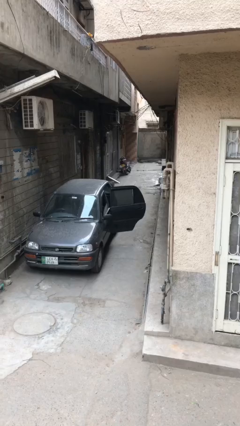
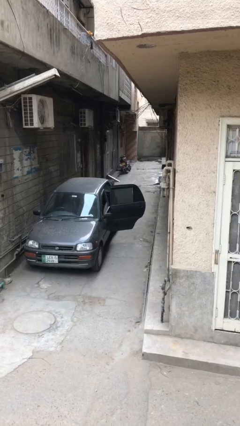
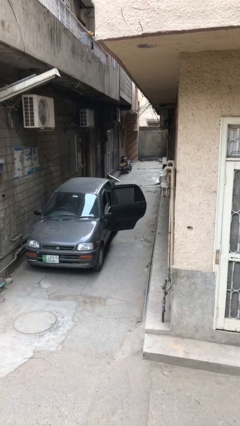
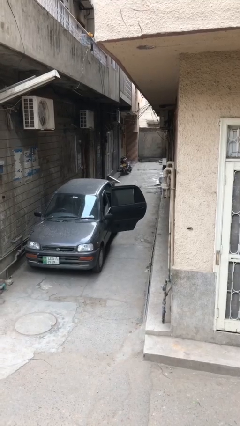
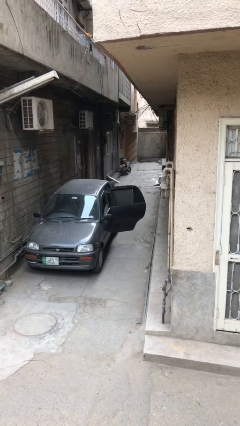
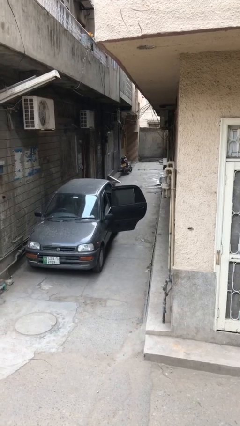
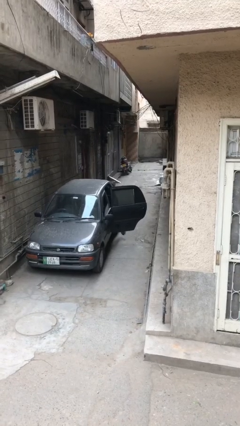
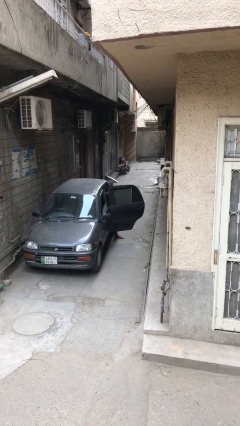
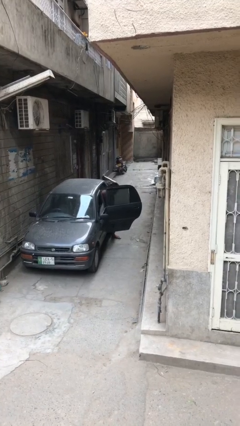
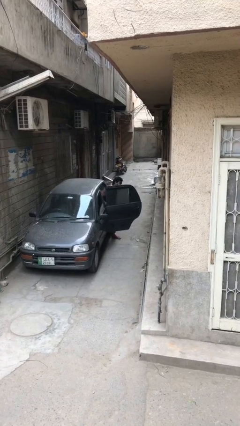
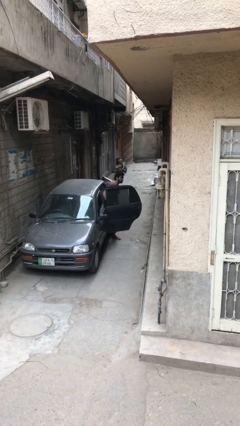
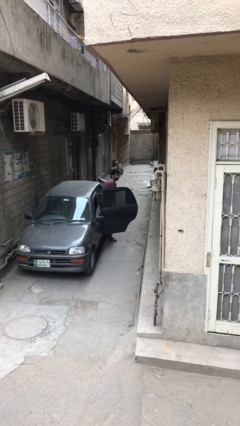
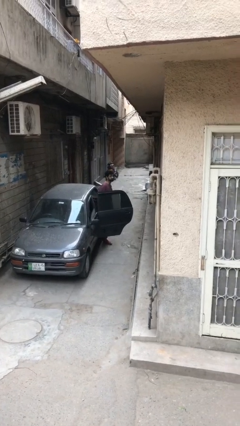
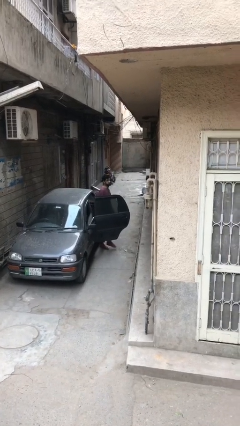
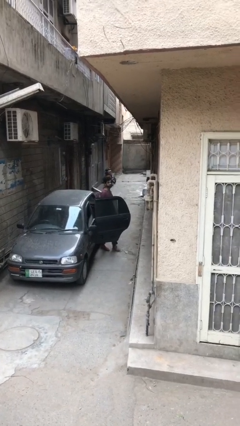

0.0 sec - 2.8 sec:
person exits car

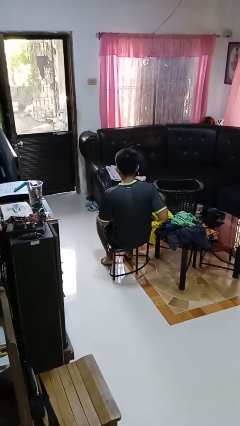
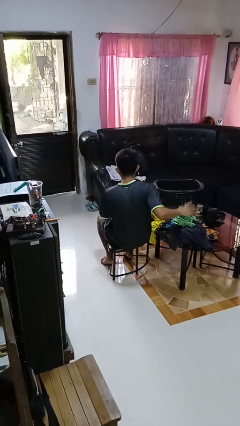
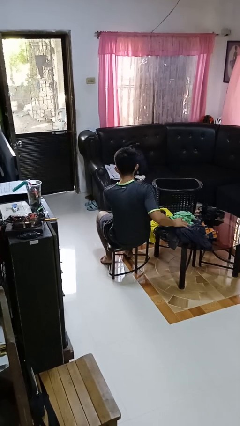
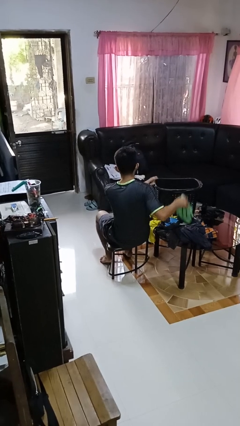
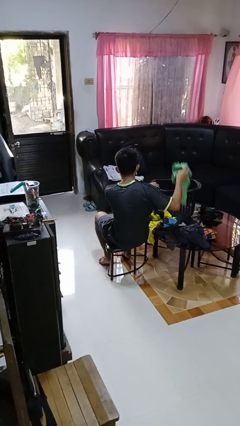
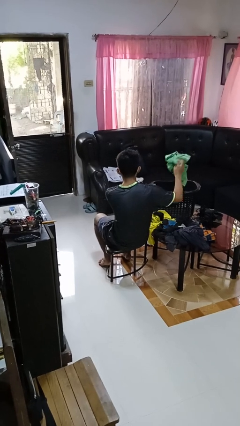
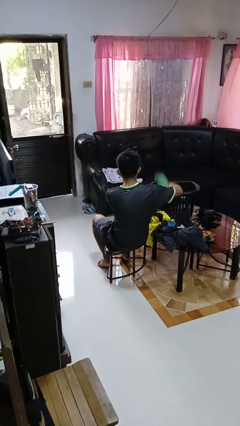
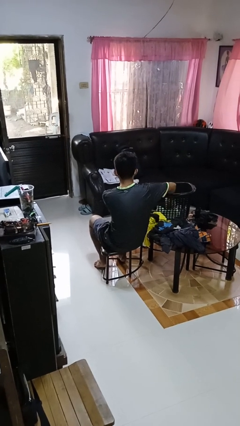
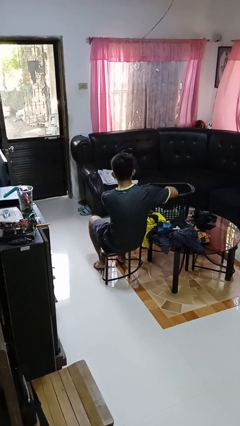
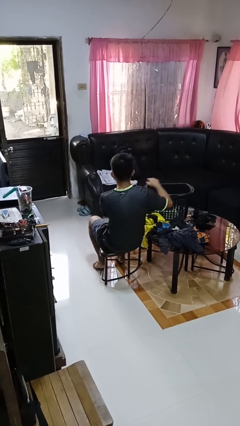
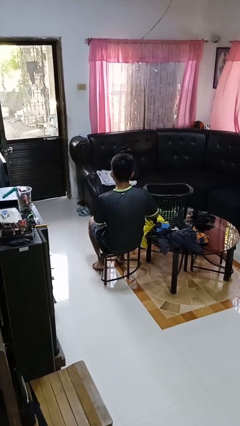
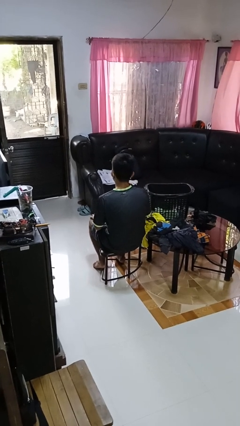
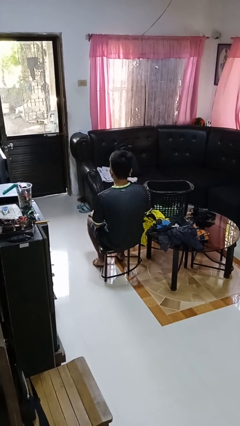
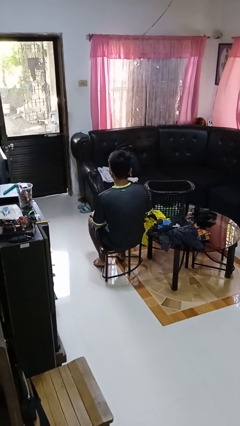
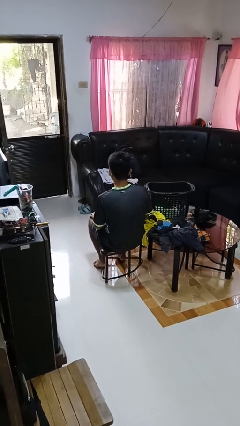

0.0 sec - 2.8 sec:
person puts object into basket

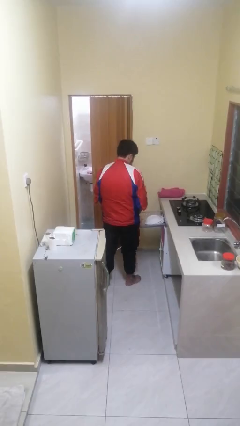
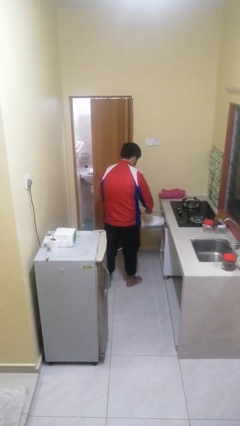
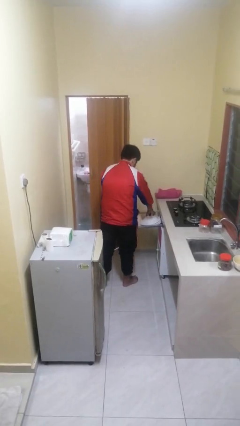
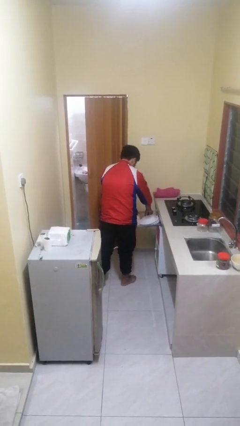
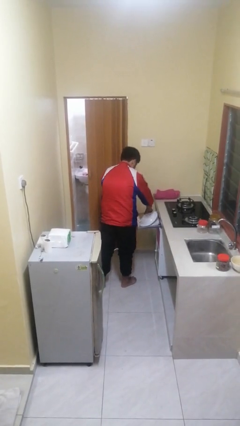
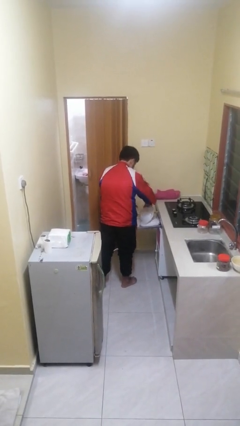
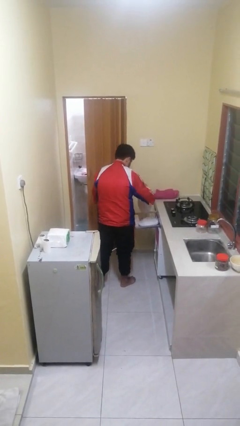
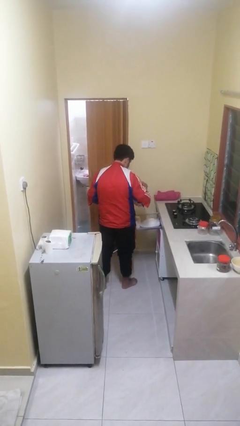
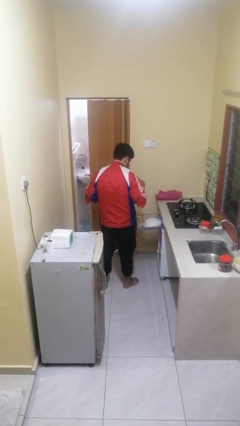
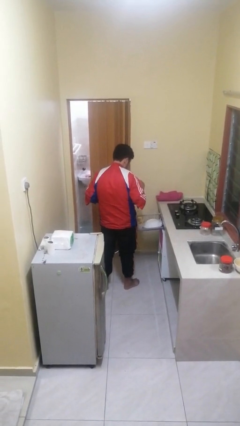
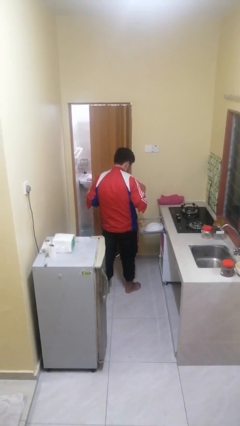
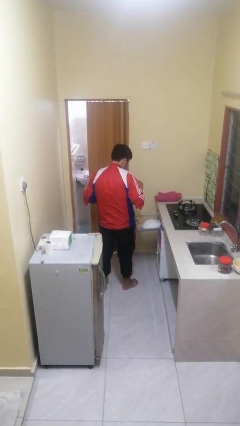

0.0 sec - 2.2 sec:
person takes object from kitchen drawer

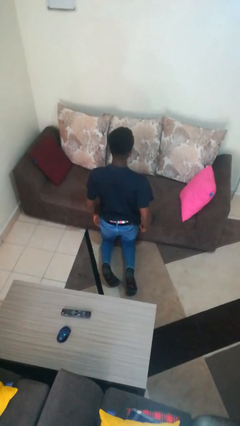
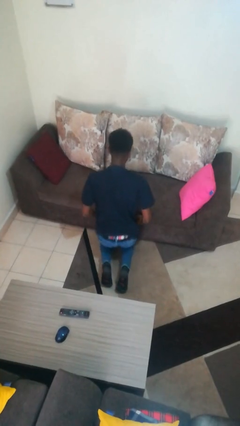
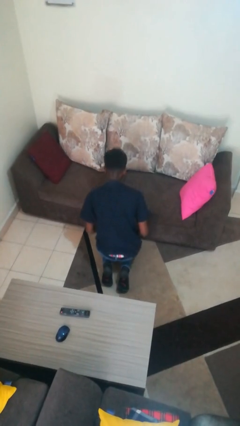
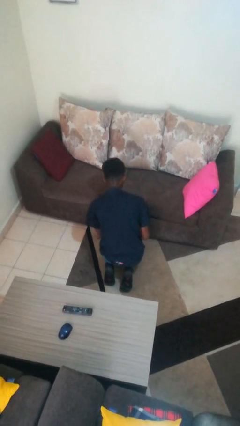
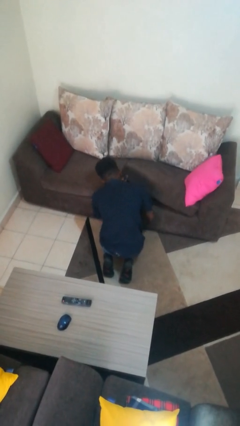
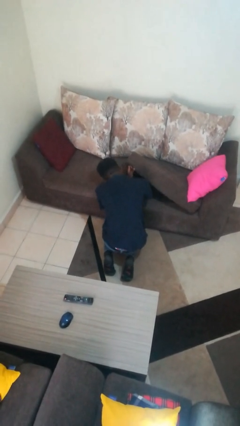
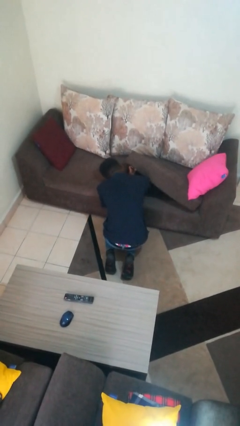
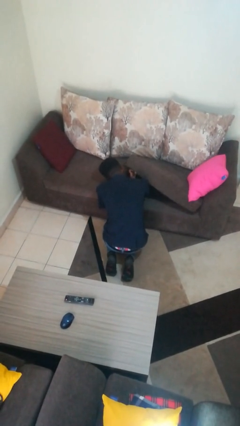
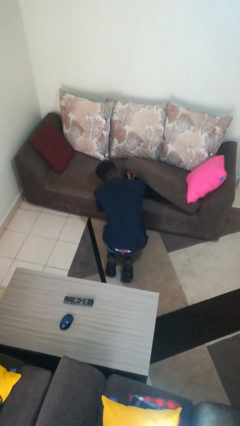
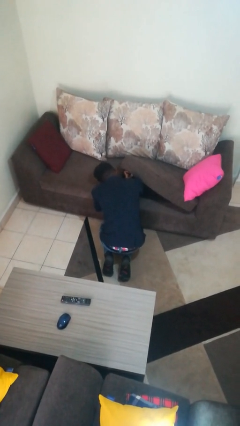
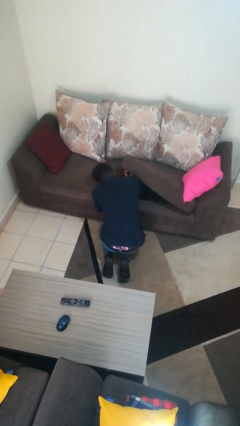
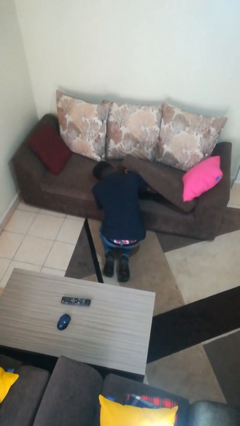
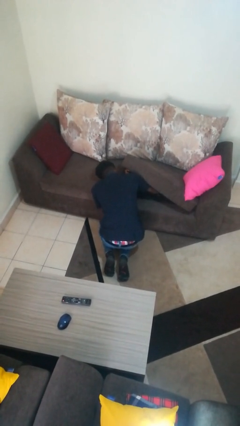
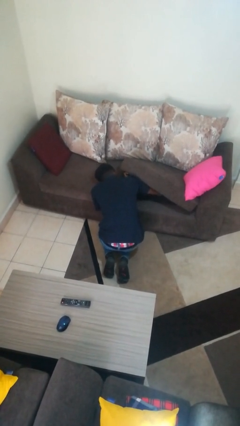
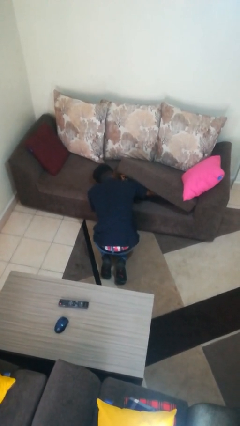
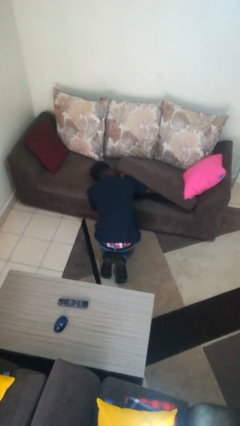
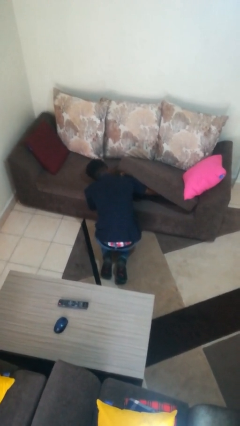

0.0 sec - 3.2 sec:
person searches under couch

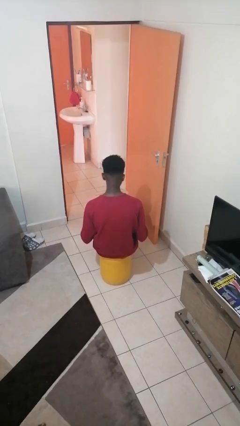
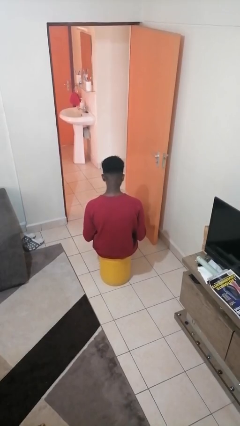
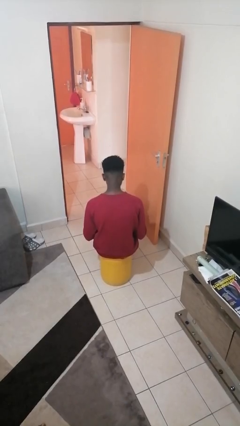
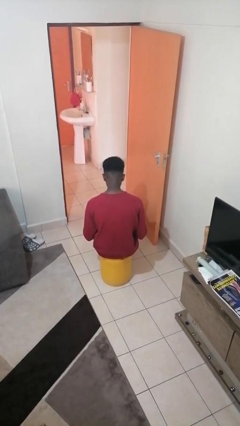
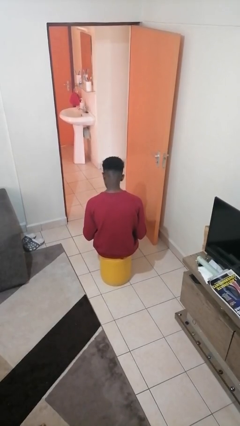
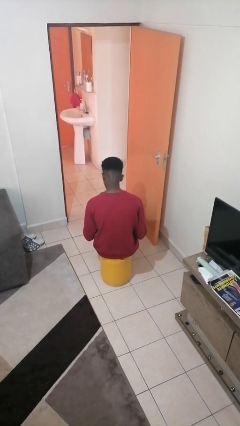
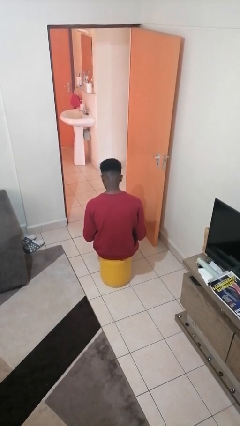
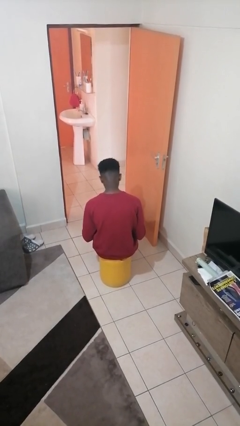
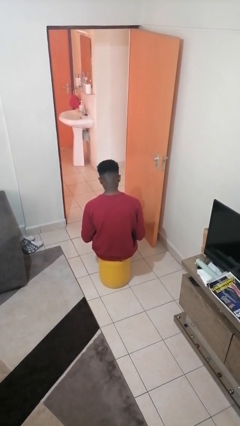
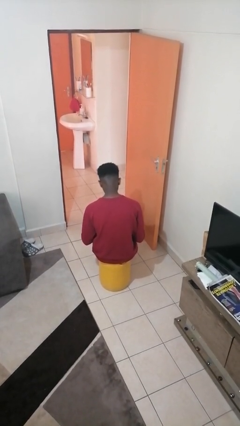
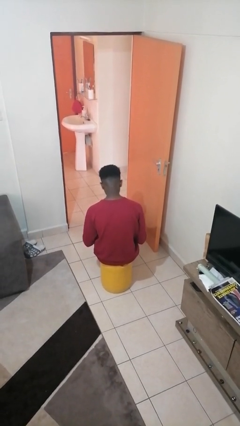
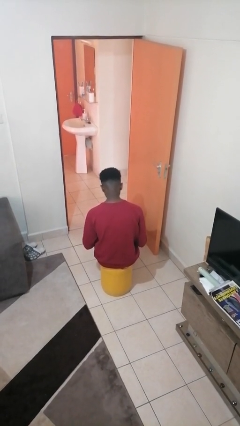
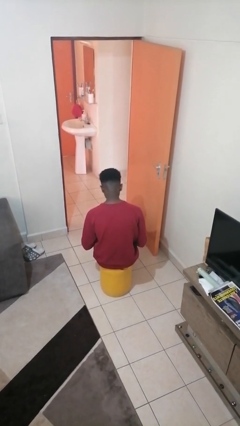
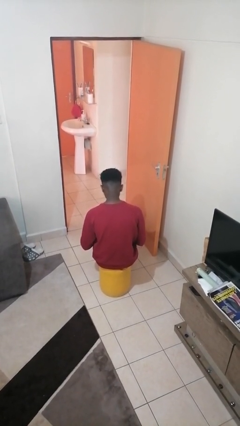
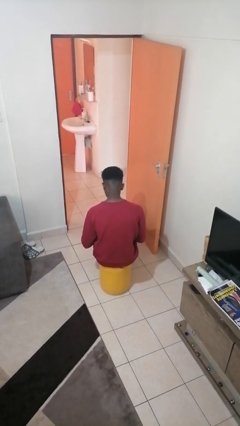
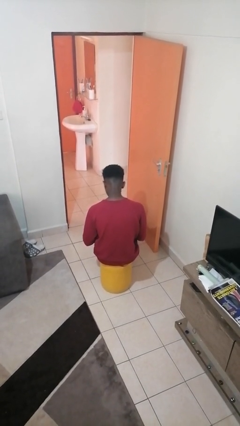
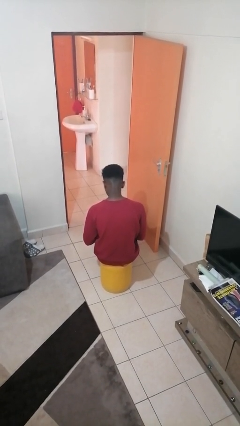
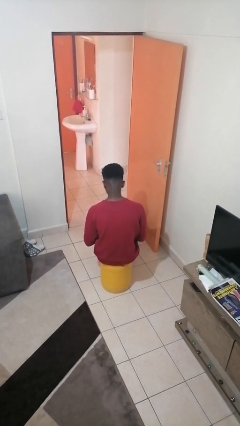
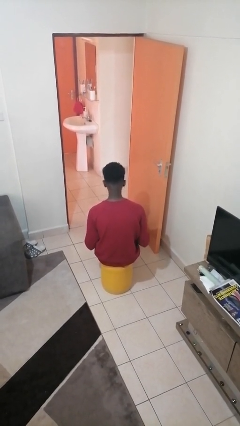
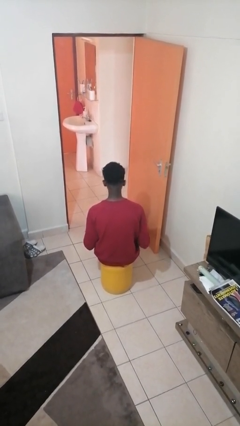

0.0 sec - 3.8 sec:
person looks at hands in lap

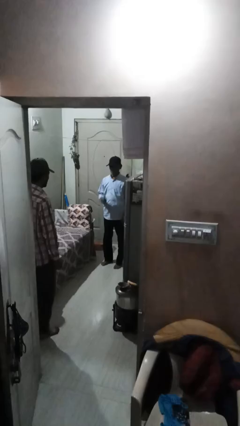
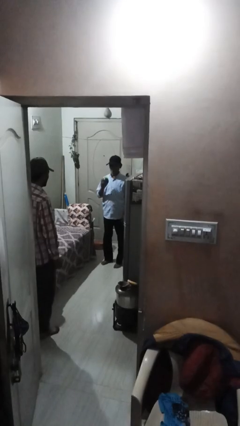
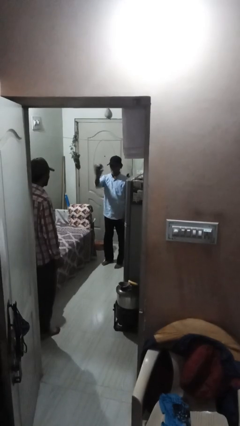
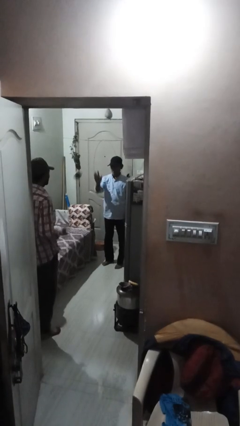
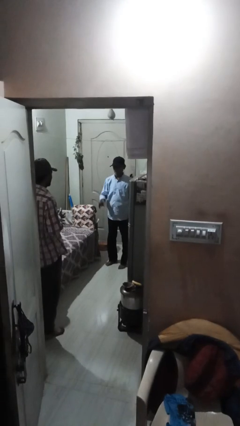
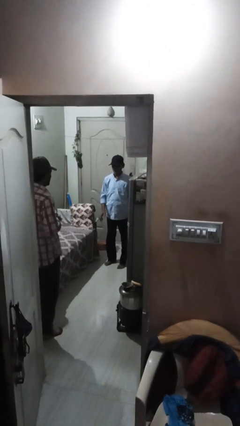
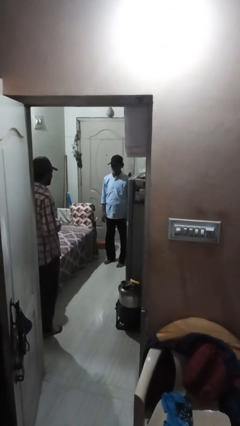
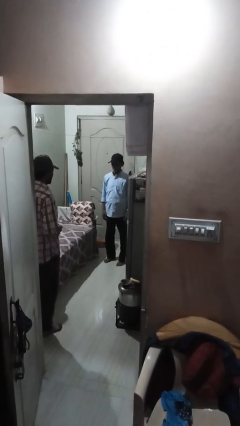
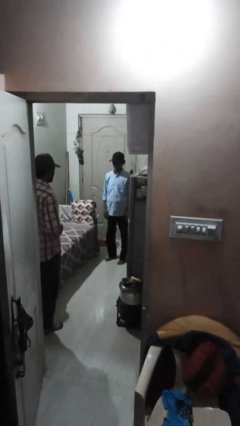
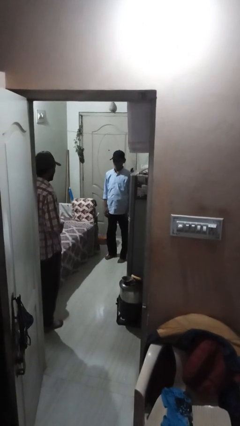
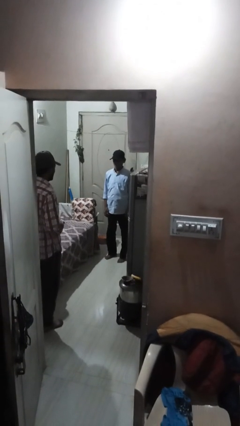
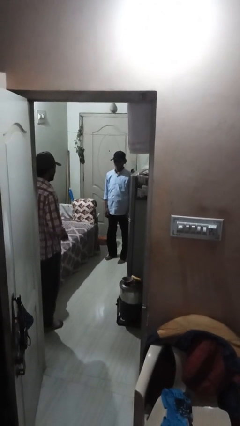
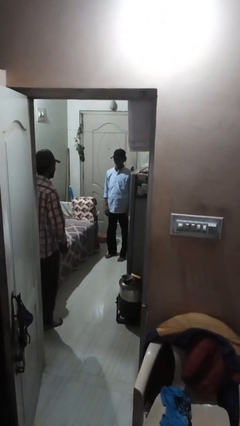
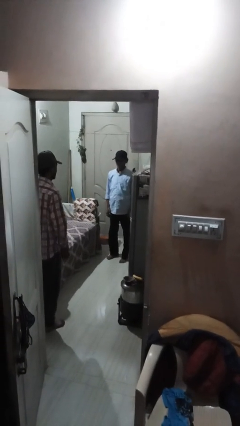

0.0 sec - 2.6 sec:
person throws object to person
